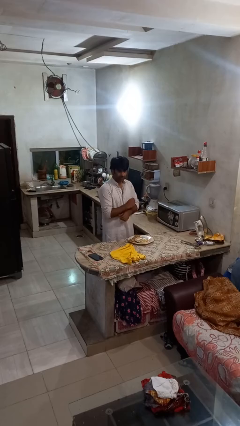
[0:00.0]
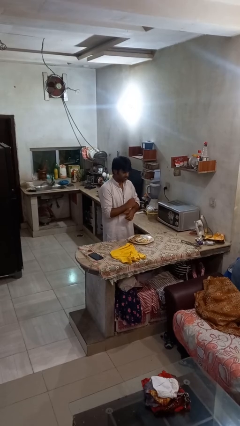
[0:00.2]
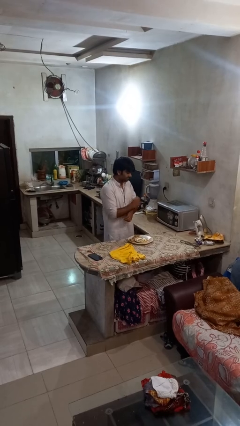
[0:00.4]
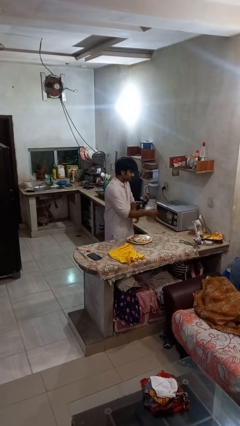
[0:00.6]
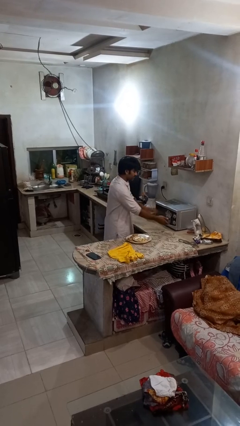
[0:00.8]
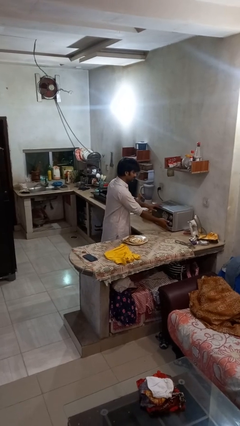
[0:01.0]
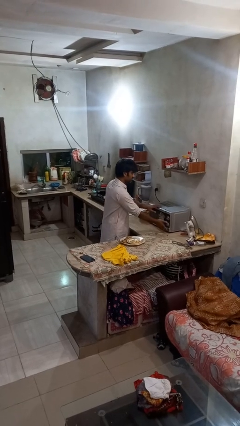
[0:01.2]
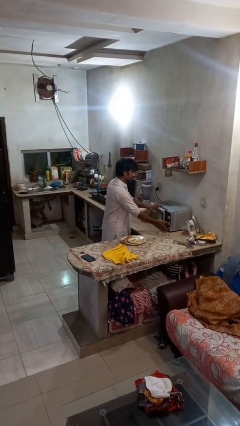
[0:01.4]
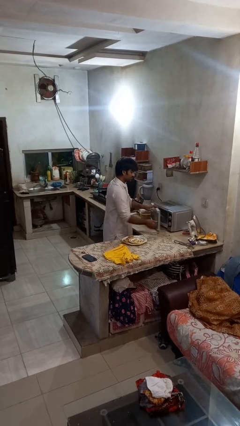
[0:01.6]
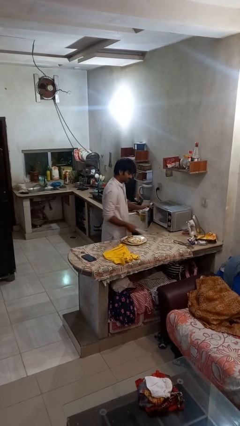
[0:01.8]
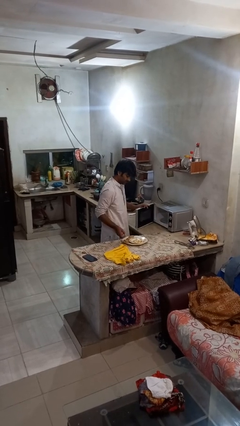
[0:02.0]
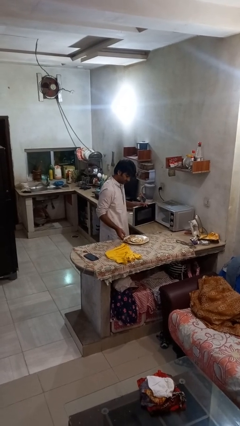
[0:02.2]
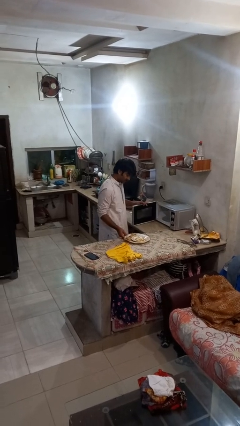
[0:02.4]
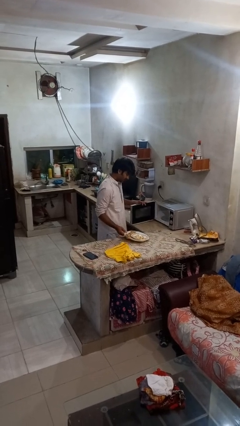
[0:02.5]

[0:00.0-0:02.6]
person opens microwave

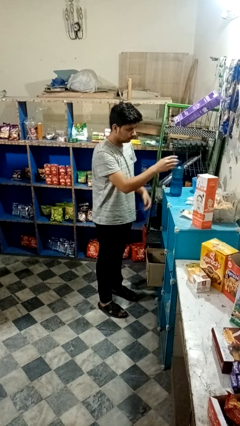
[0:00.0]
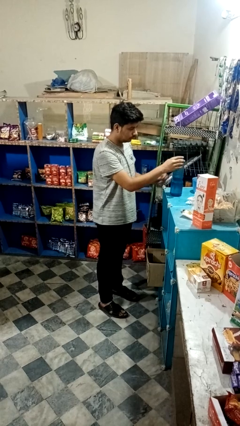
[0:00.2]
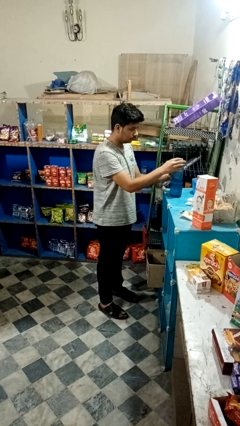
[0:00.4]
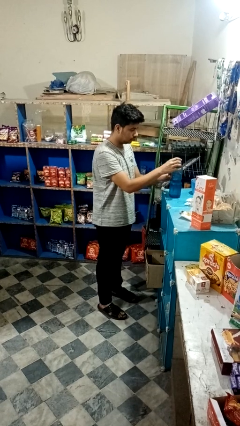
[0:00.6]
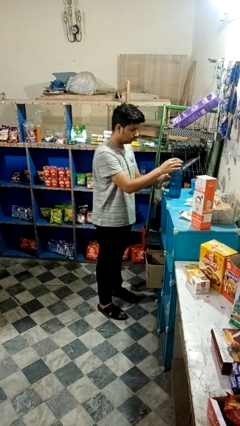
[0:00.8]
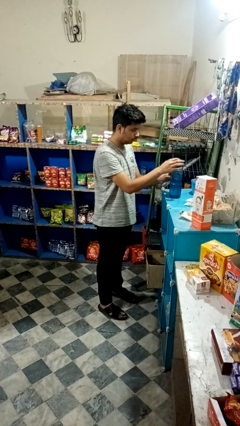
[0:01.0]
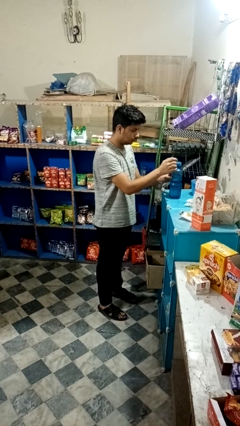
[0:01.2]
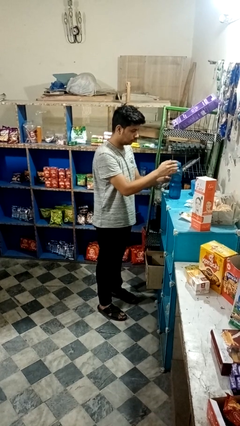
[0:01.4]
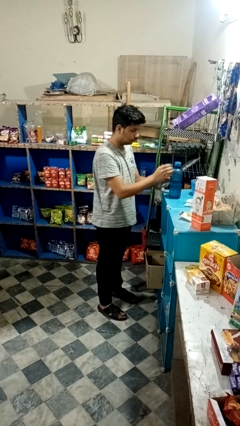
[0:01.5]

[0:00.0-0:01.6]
person screws lid to bottle

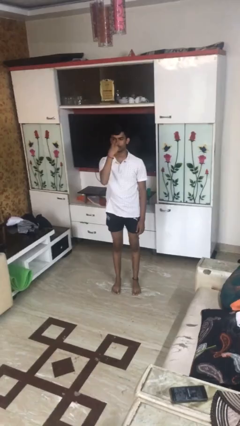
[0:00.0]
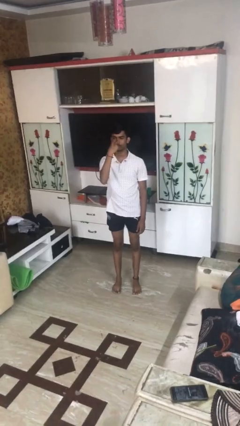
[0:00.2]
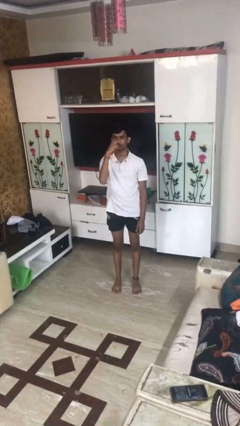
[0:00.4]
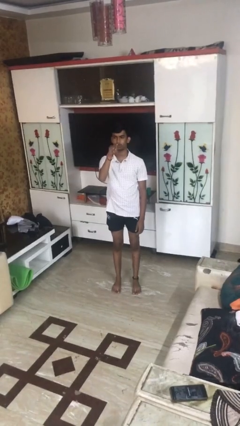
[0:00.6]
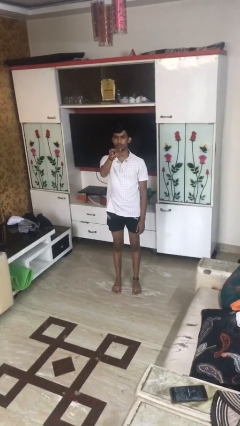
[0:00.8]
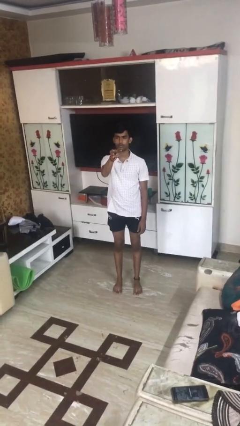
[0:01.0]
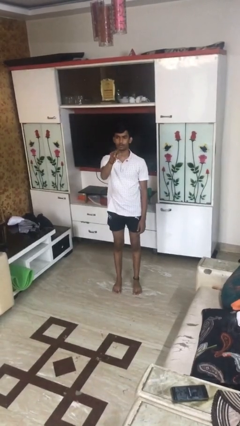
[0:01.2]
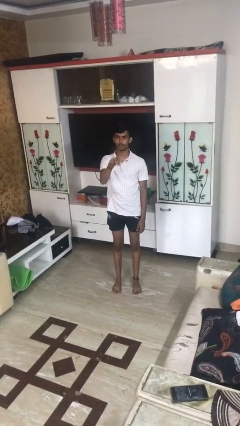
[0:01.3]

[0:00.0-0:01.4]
person gestures watch closely

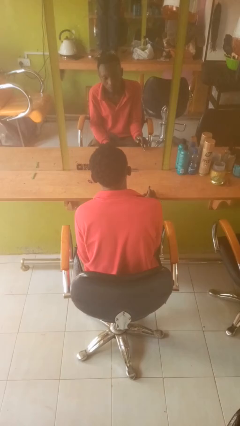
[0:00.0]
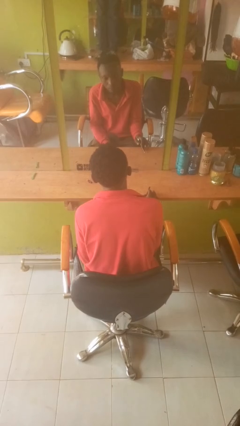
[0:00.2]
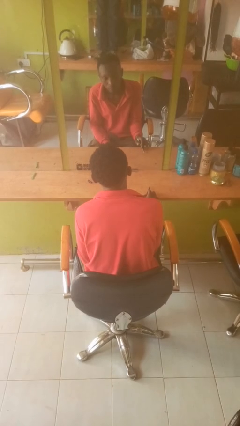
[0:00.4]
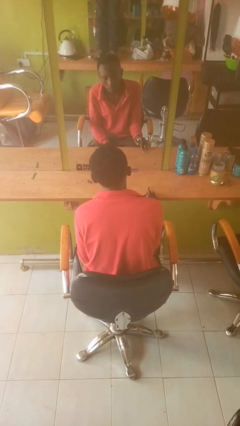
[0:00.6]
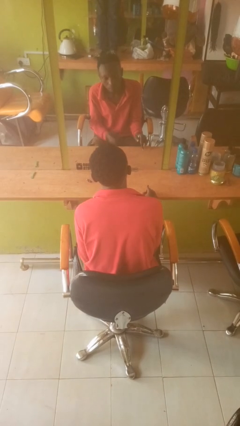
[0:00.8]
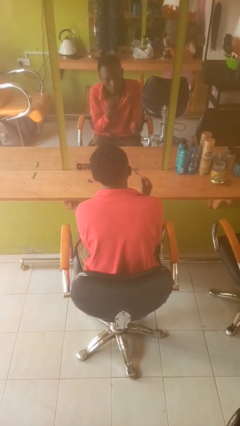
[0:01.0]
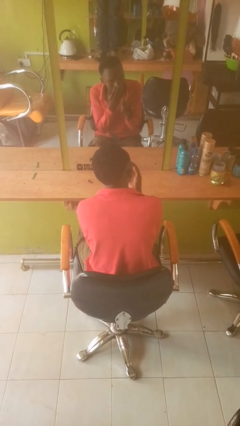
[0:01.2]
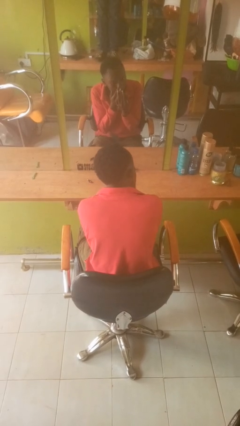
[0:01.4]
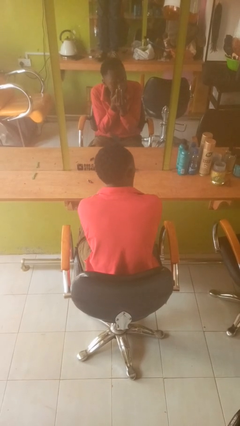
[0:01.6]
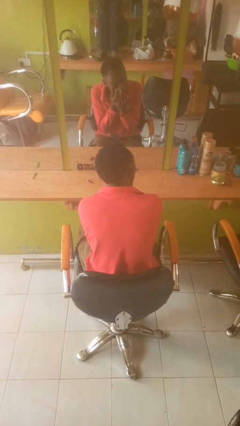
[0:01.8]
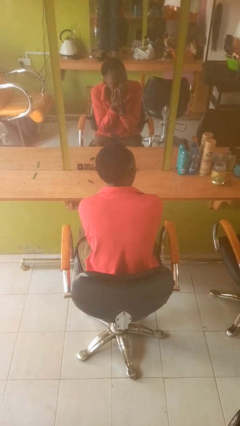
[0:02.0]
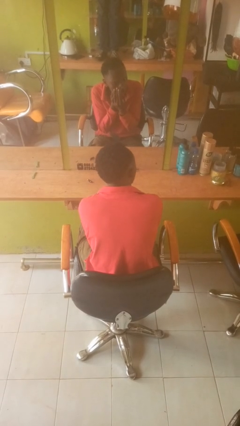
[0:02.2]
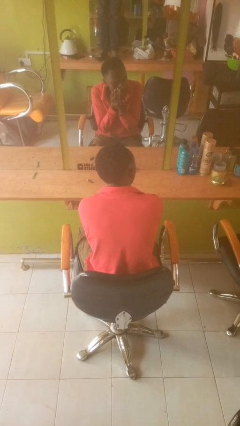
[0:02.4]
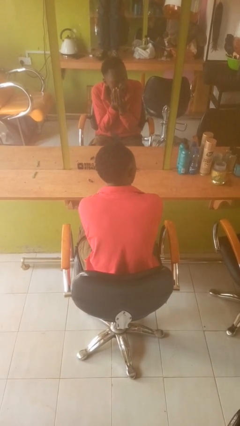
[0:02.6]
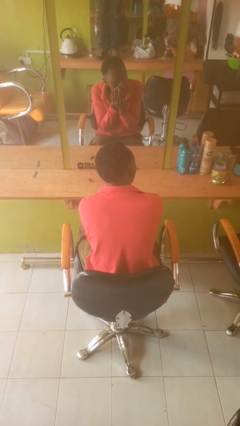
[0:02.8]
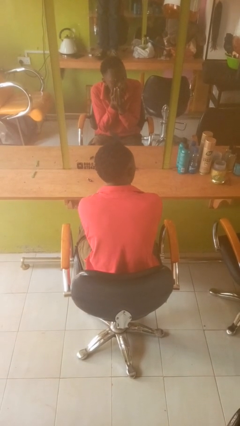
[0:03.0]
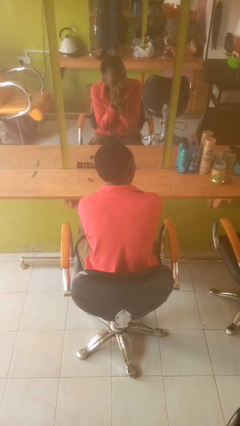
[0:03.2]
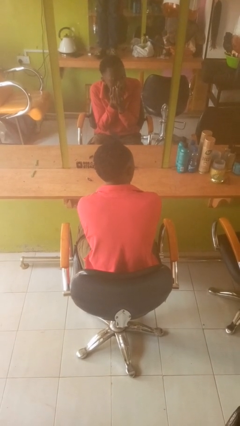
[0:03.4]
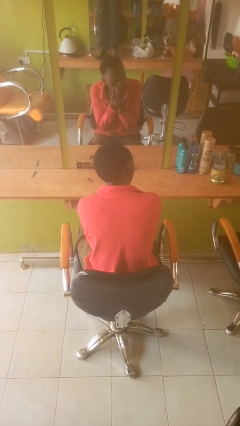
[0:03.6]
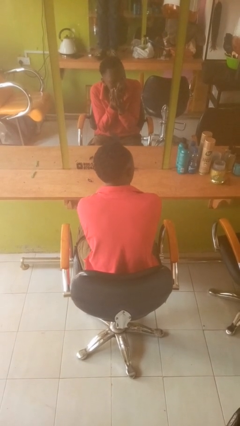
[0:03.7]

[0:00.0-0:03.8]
person applies eye makeup

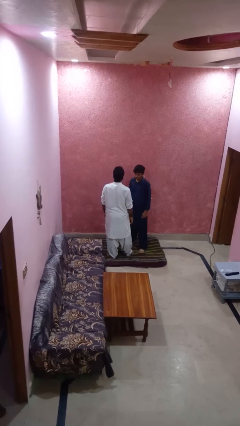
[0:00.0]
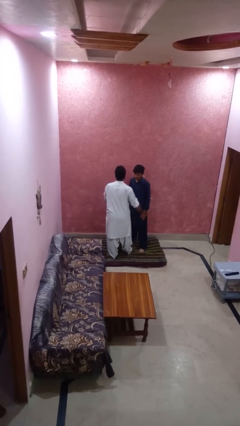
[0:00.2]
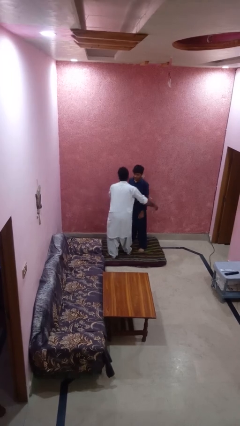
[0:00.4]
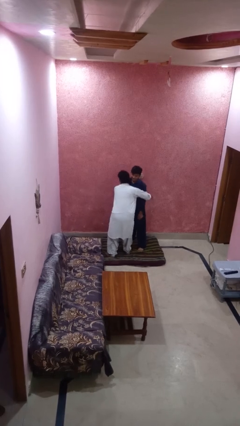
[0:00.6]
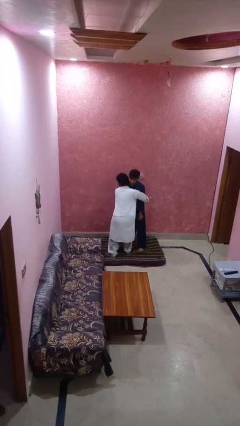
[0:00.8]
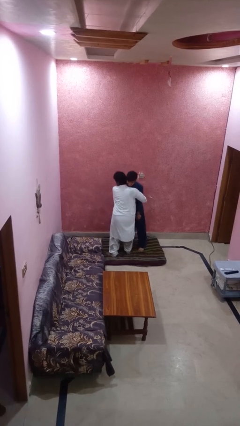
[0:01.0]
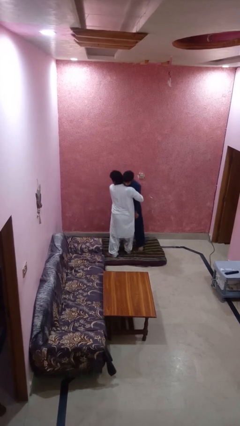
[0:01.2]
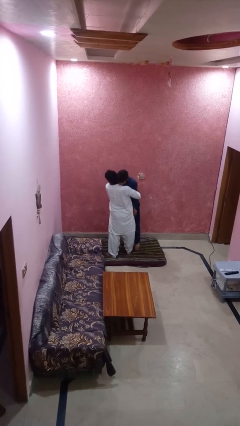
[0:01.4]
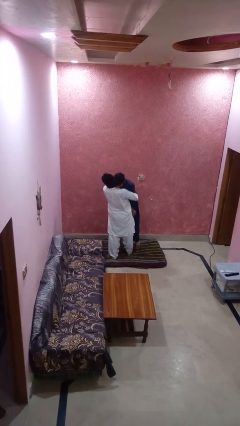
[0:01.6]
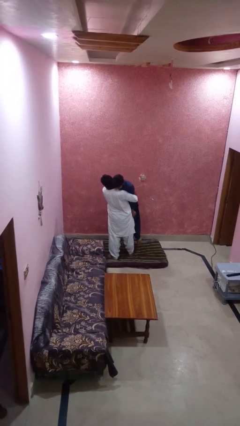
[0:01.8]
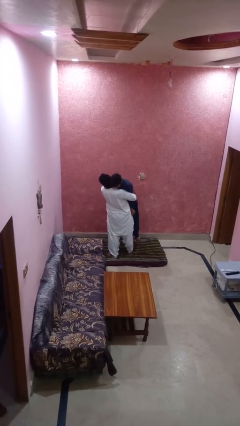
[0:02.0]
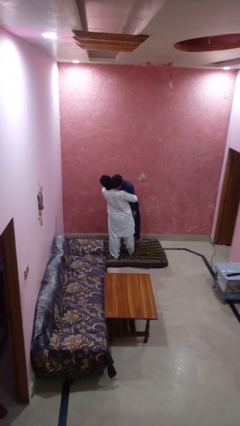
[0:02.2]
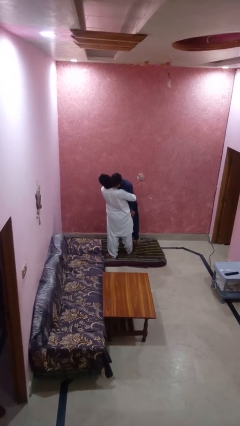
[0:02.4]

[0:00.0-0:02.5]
person picks up person

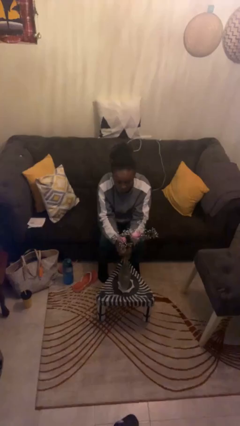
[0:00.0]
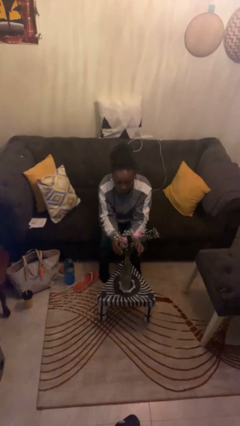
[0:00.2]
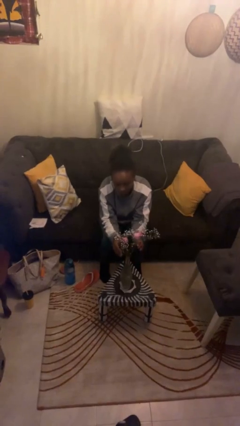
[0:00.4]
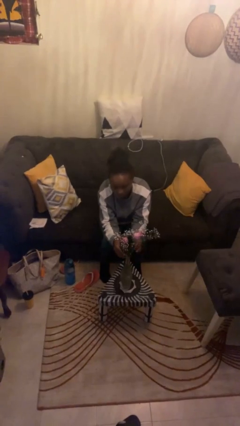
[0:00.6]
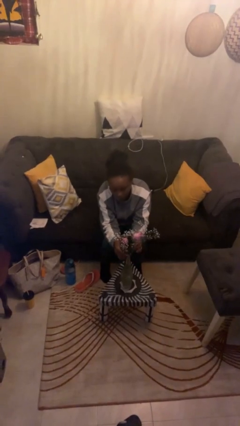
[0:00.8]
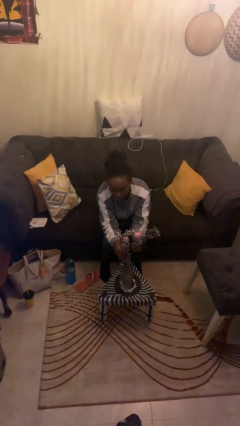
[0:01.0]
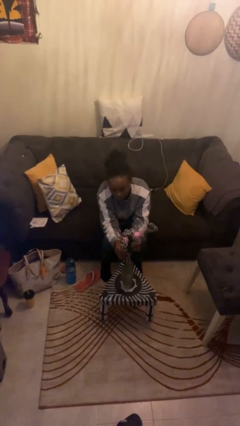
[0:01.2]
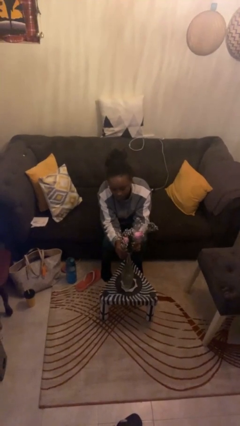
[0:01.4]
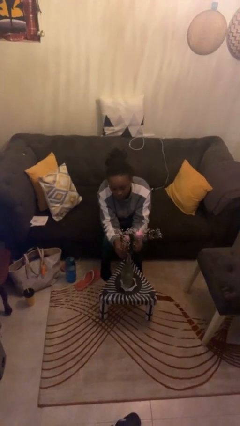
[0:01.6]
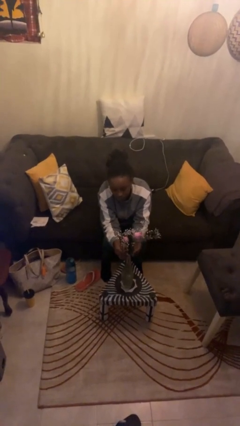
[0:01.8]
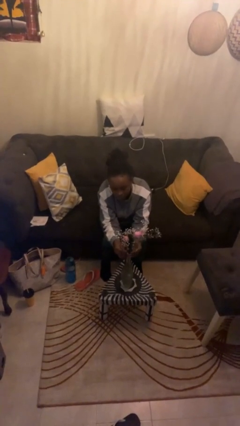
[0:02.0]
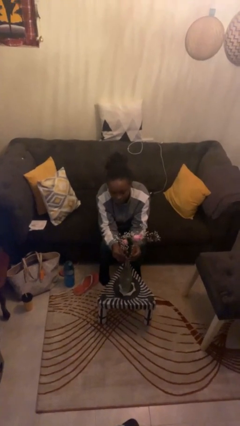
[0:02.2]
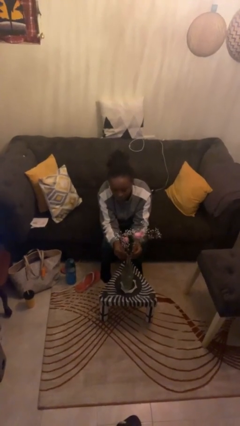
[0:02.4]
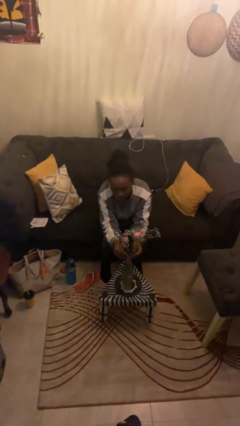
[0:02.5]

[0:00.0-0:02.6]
person arranges flowers in vase

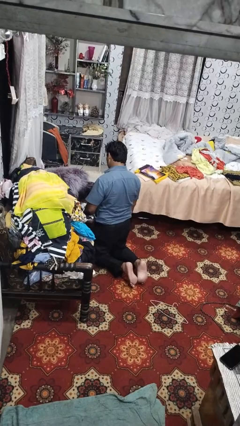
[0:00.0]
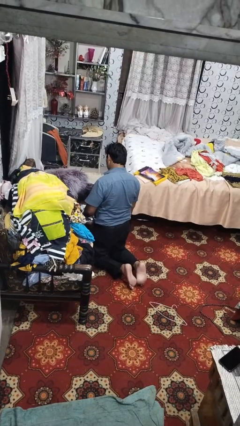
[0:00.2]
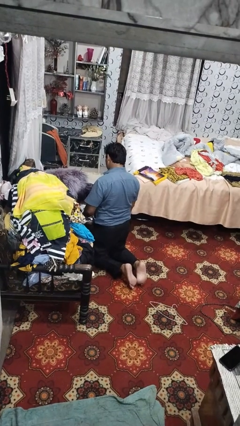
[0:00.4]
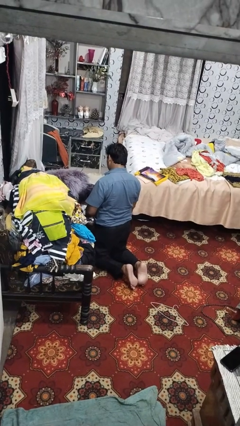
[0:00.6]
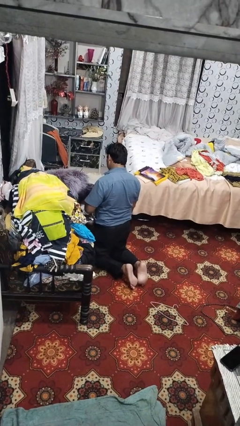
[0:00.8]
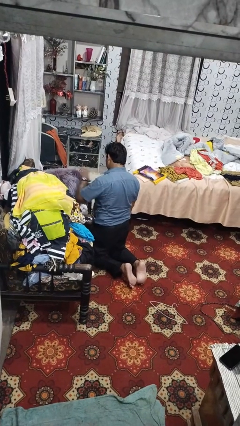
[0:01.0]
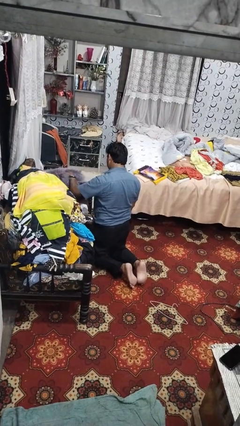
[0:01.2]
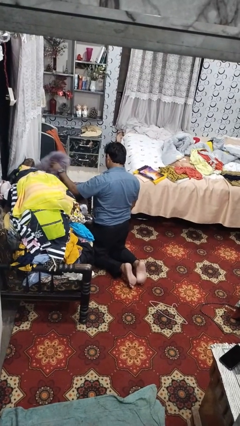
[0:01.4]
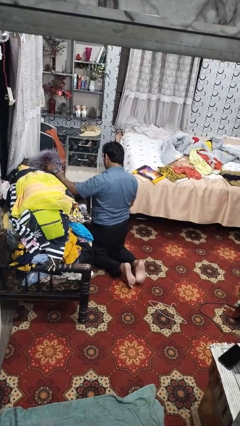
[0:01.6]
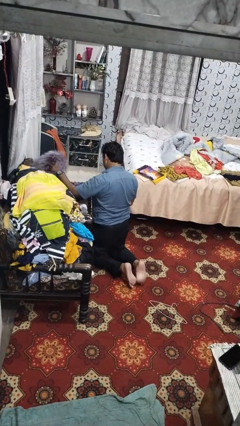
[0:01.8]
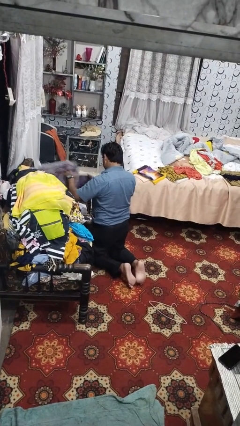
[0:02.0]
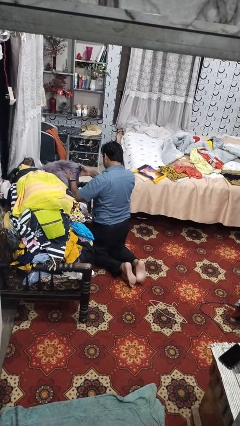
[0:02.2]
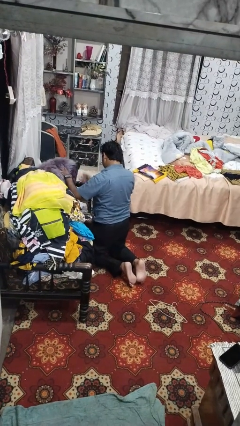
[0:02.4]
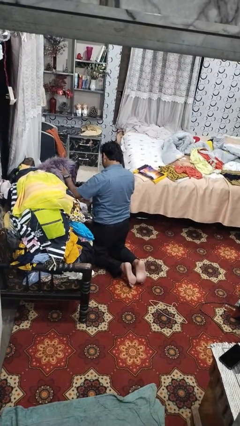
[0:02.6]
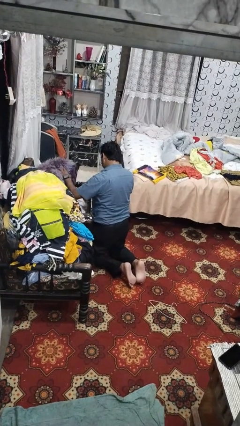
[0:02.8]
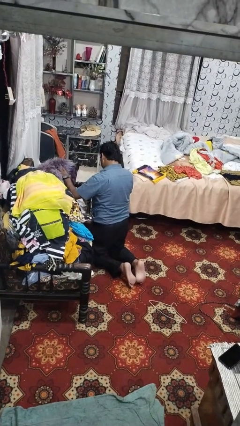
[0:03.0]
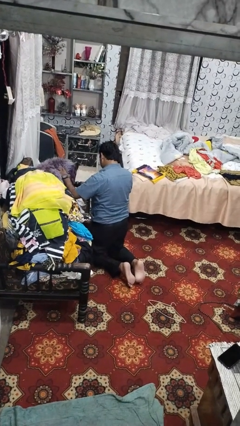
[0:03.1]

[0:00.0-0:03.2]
person searches in couch
